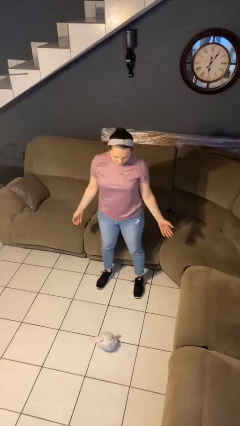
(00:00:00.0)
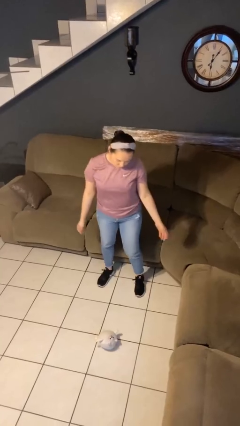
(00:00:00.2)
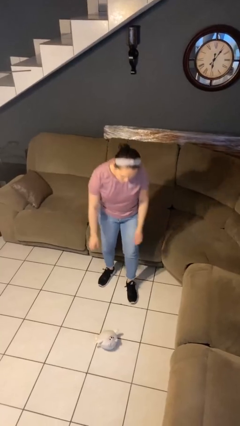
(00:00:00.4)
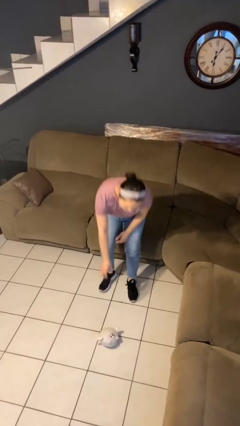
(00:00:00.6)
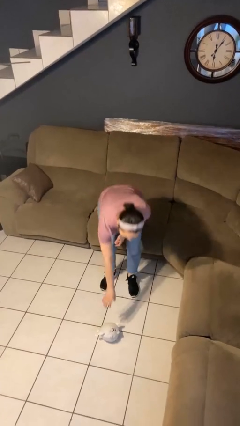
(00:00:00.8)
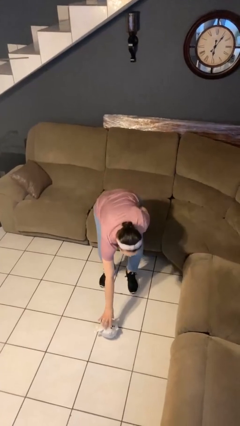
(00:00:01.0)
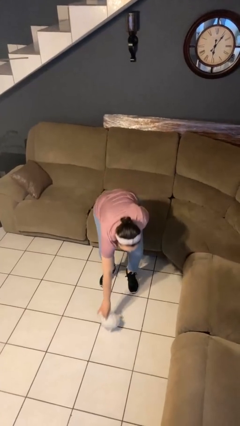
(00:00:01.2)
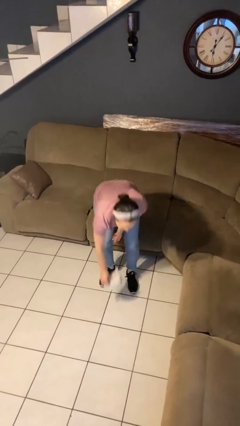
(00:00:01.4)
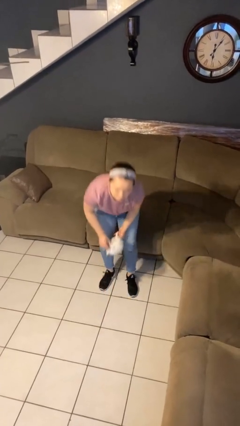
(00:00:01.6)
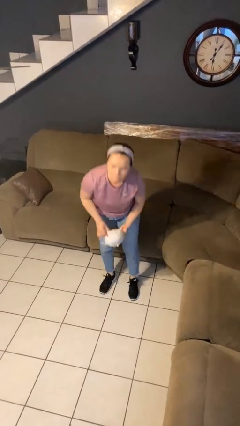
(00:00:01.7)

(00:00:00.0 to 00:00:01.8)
person picks up object from floor

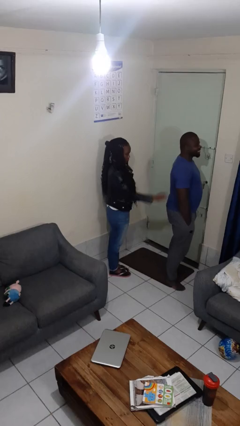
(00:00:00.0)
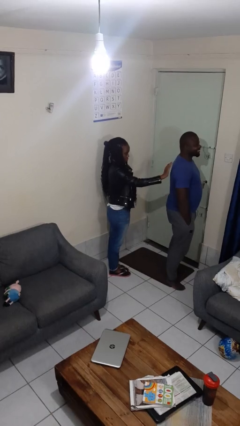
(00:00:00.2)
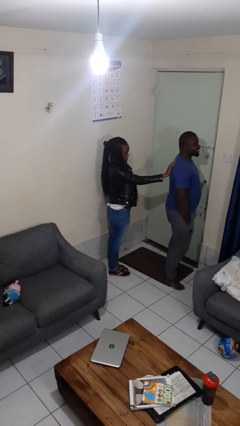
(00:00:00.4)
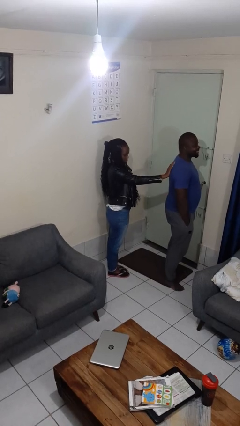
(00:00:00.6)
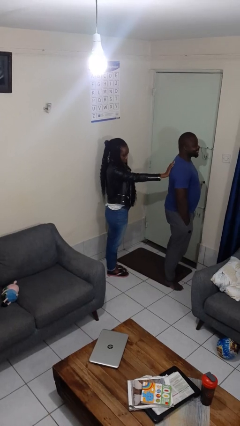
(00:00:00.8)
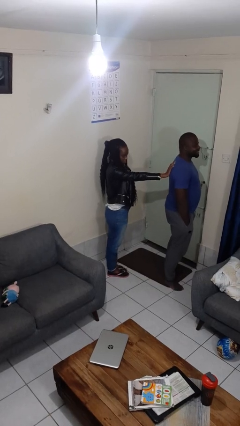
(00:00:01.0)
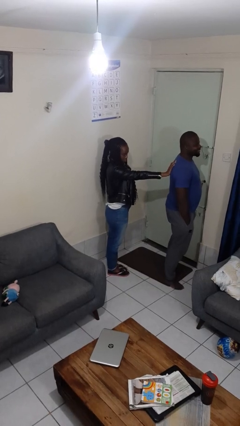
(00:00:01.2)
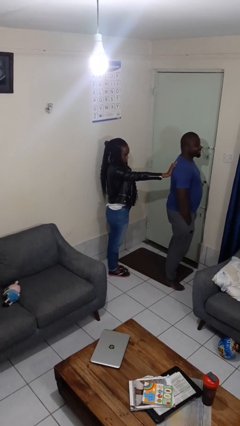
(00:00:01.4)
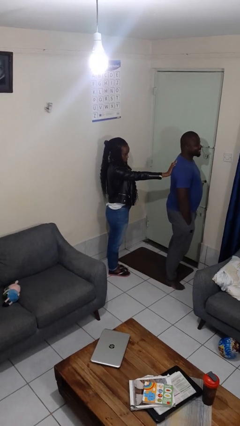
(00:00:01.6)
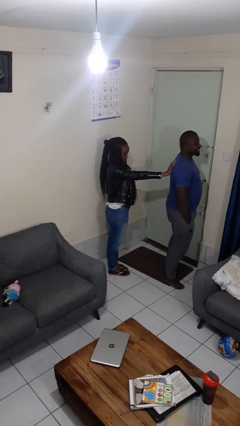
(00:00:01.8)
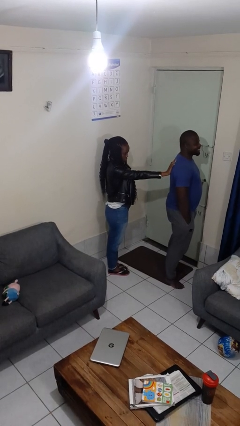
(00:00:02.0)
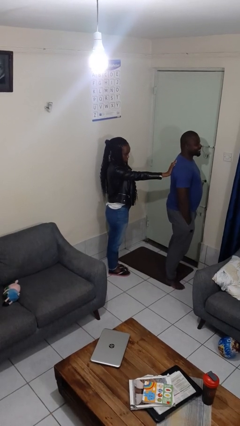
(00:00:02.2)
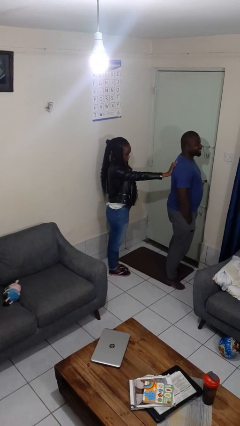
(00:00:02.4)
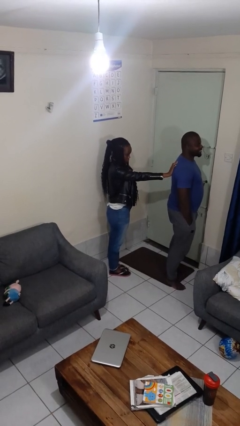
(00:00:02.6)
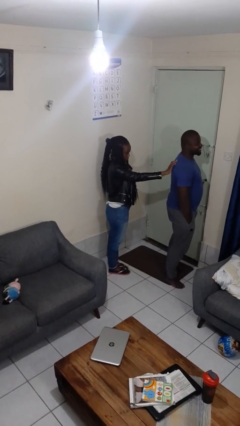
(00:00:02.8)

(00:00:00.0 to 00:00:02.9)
person touches back of person

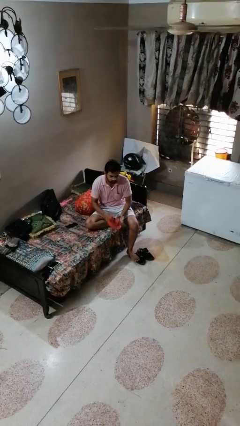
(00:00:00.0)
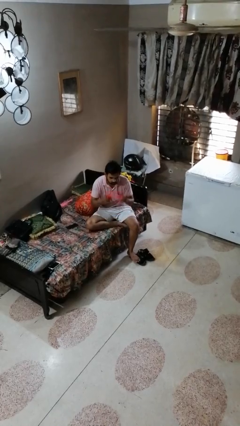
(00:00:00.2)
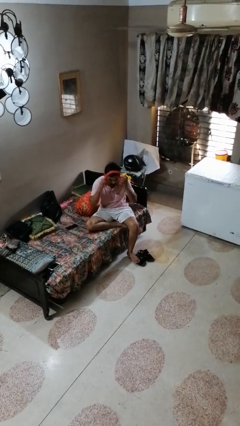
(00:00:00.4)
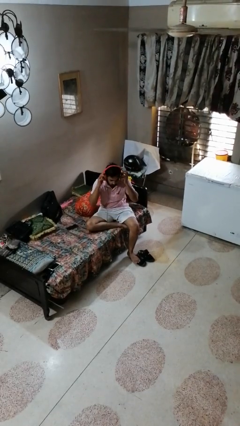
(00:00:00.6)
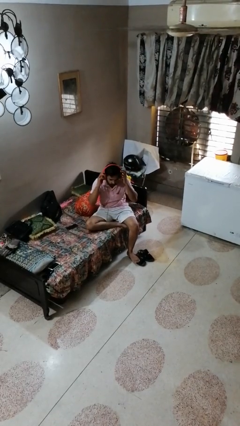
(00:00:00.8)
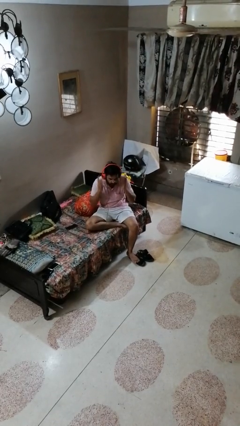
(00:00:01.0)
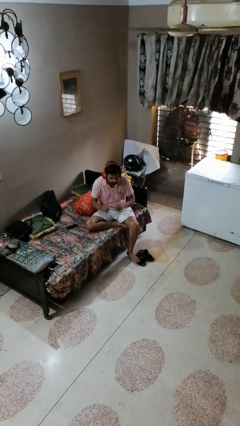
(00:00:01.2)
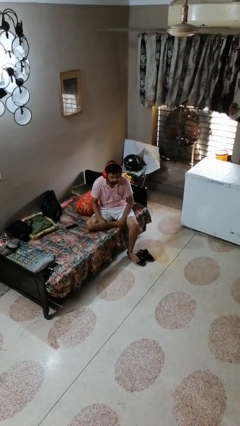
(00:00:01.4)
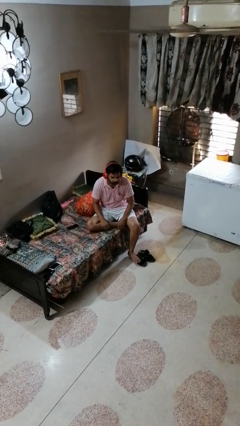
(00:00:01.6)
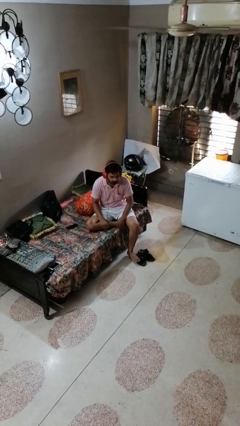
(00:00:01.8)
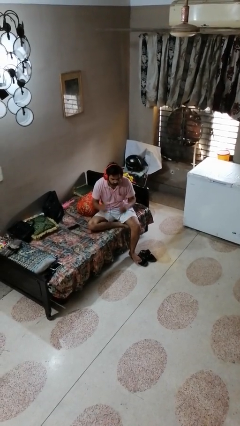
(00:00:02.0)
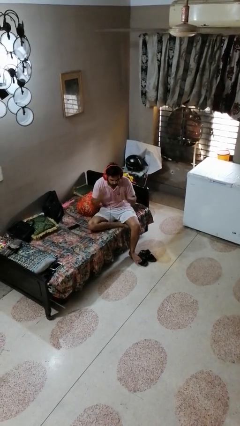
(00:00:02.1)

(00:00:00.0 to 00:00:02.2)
person puts on headphones

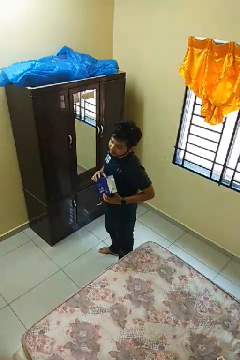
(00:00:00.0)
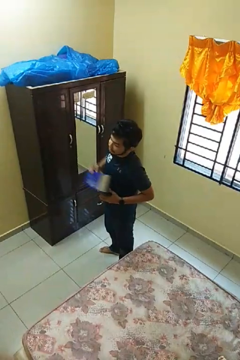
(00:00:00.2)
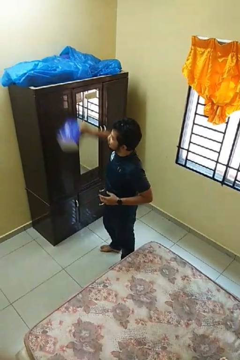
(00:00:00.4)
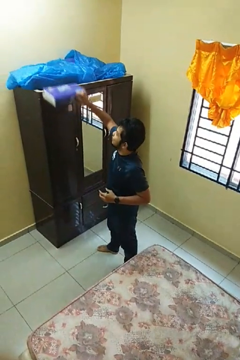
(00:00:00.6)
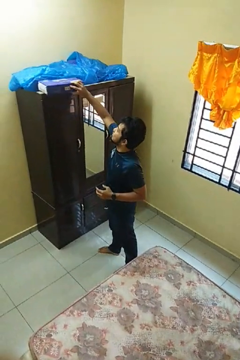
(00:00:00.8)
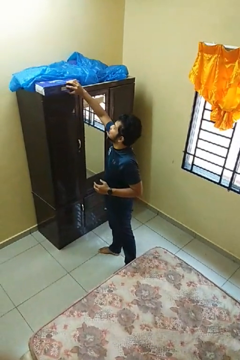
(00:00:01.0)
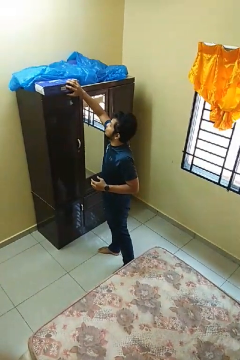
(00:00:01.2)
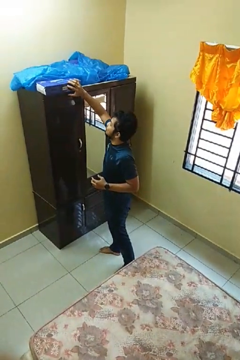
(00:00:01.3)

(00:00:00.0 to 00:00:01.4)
person puts down object on countertop

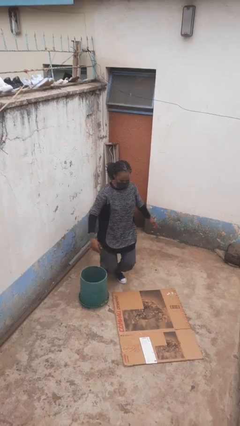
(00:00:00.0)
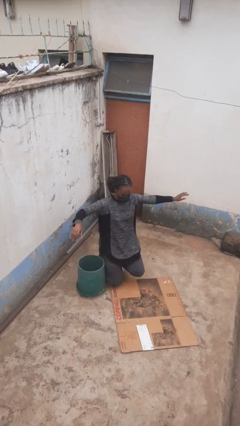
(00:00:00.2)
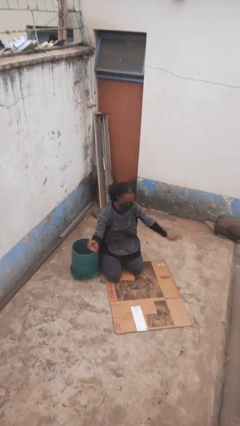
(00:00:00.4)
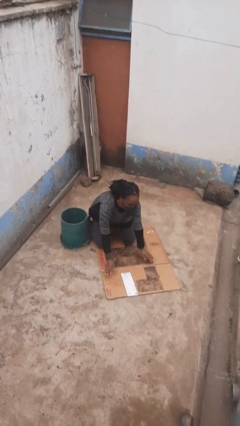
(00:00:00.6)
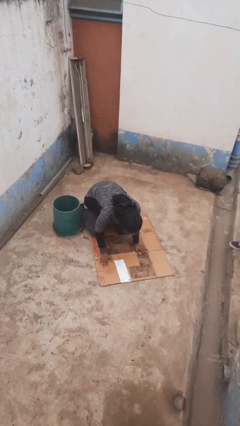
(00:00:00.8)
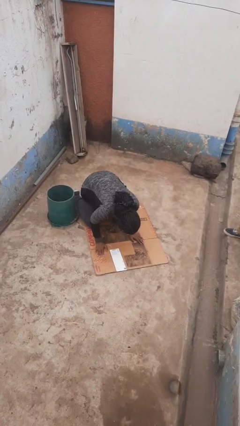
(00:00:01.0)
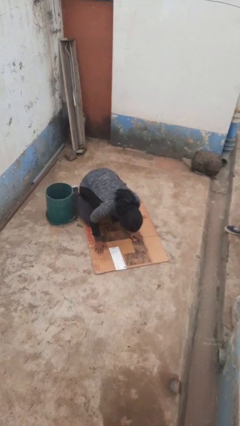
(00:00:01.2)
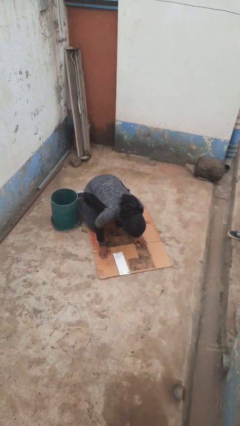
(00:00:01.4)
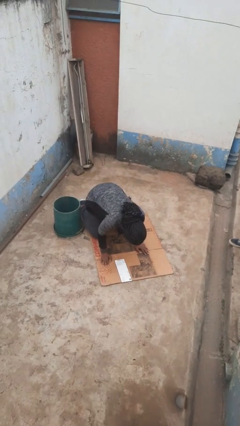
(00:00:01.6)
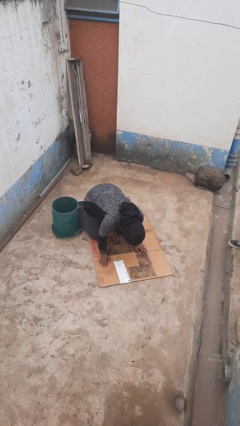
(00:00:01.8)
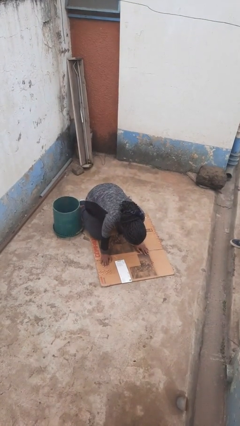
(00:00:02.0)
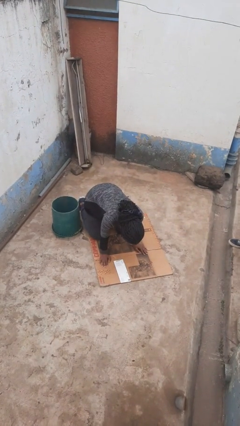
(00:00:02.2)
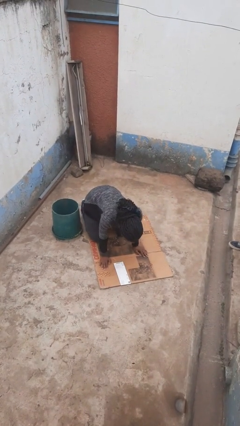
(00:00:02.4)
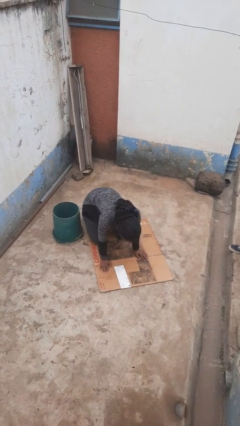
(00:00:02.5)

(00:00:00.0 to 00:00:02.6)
person trips on object on floor

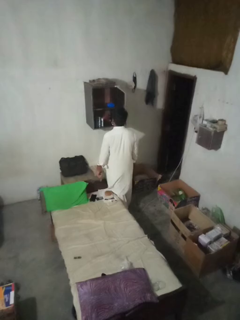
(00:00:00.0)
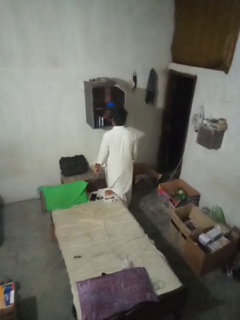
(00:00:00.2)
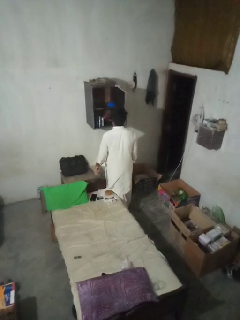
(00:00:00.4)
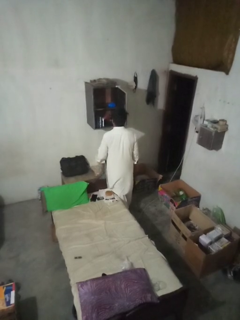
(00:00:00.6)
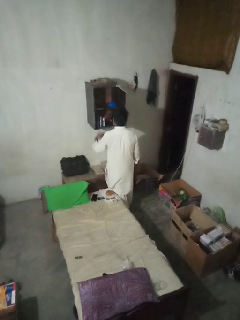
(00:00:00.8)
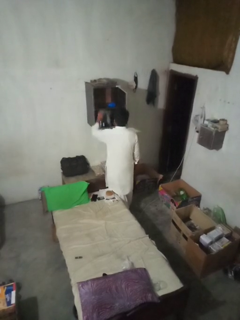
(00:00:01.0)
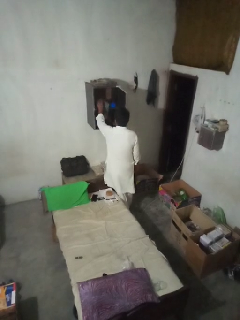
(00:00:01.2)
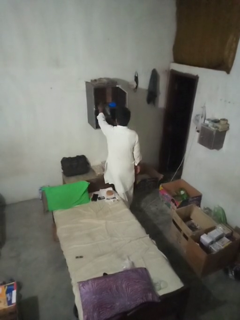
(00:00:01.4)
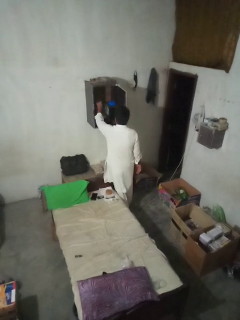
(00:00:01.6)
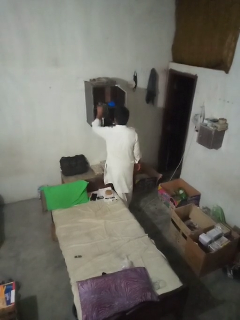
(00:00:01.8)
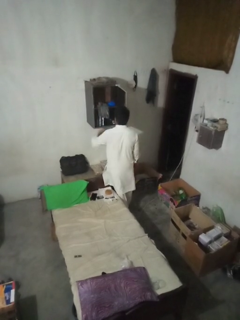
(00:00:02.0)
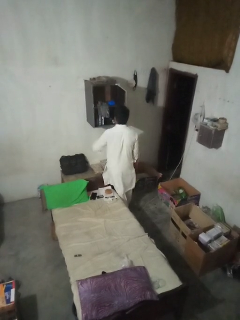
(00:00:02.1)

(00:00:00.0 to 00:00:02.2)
person puts clothes into dresser

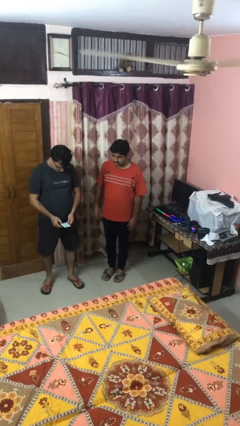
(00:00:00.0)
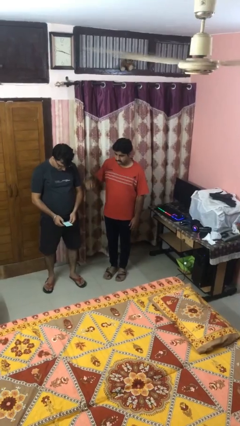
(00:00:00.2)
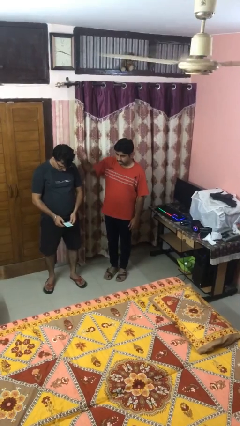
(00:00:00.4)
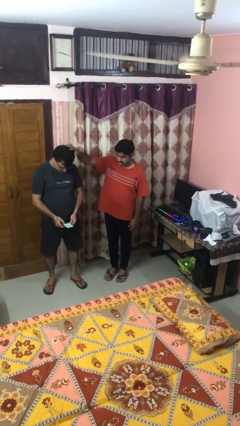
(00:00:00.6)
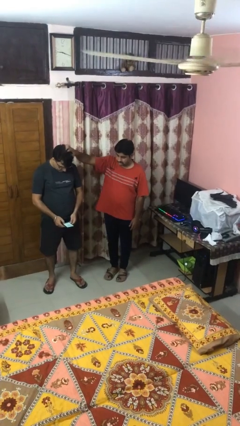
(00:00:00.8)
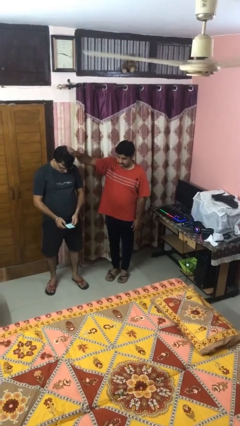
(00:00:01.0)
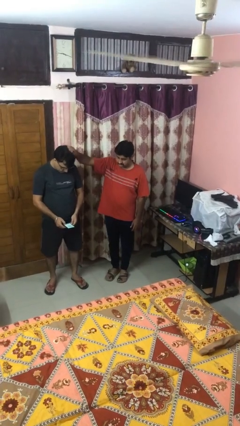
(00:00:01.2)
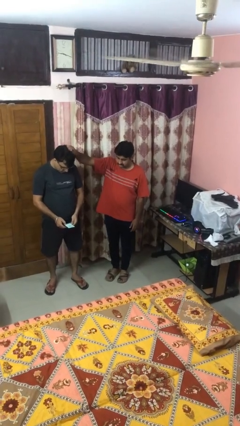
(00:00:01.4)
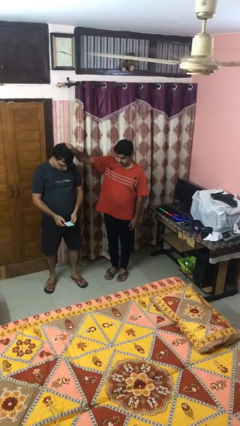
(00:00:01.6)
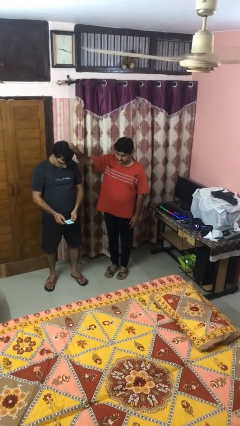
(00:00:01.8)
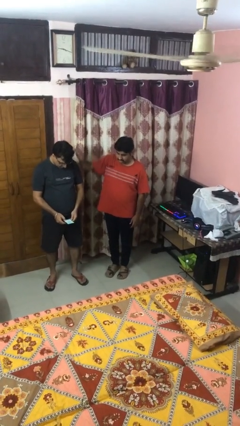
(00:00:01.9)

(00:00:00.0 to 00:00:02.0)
person grabs person by hair

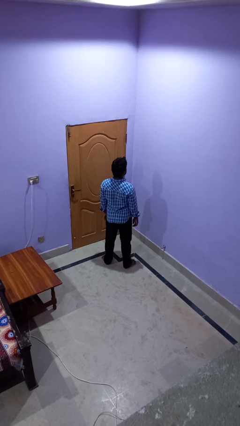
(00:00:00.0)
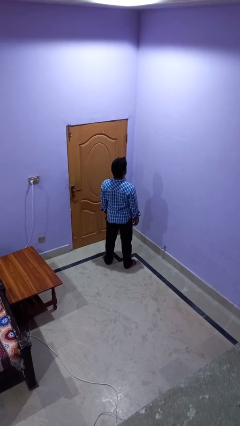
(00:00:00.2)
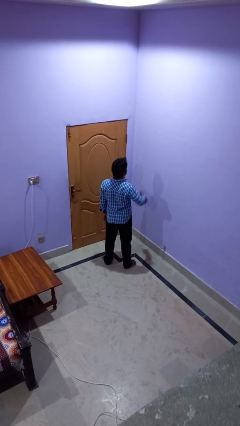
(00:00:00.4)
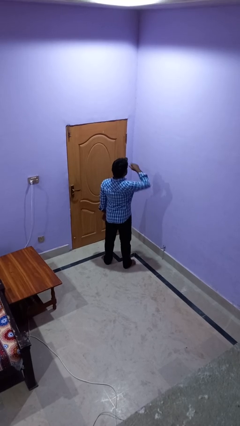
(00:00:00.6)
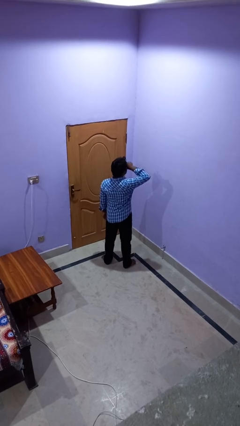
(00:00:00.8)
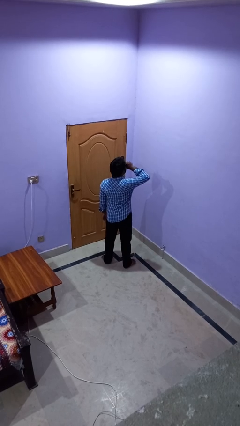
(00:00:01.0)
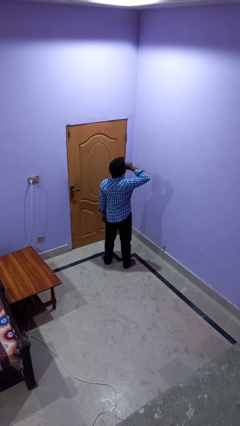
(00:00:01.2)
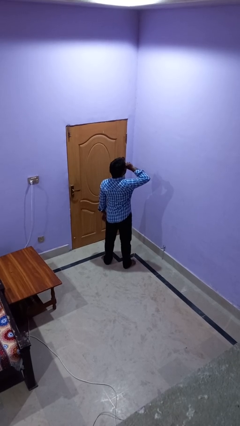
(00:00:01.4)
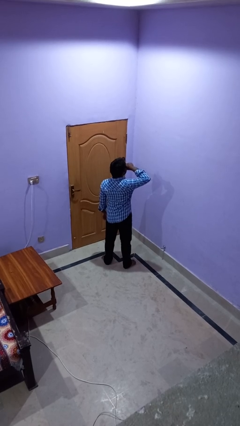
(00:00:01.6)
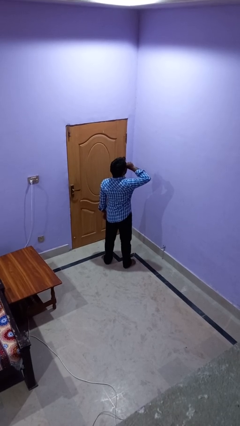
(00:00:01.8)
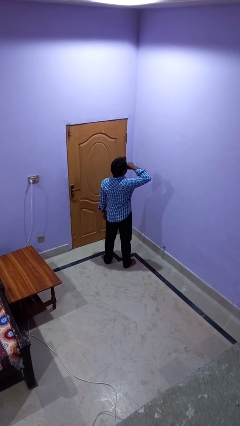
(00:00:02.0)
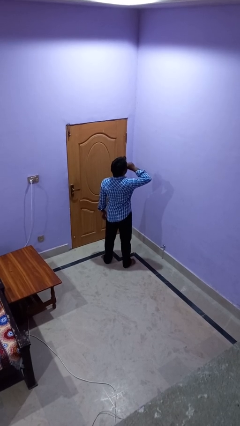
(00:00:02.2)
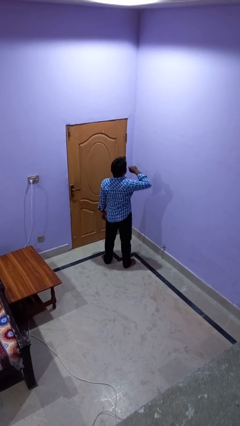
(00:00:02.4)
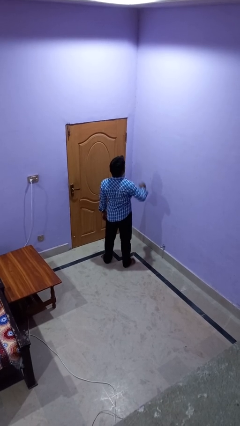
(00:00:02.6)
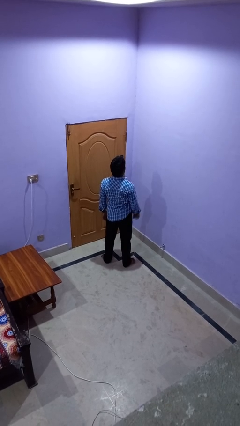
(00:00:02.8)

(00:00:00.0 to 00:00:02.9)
person rubs eyes
